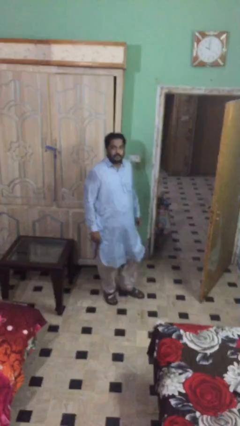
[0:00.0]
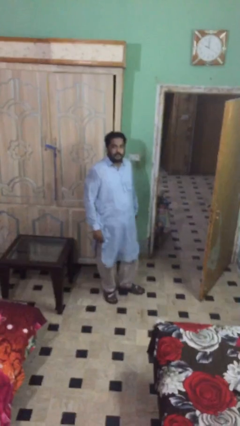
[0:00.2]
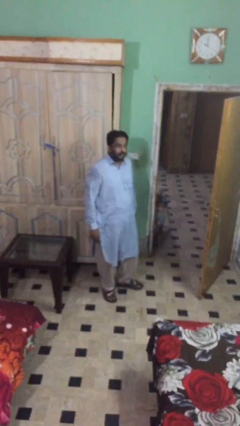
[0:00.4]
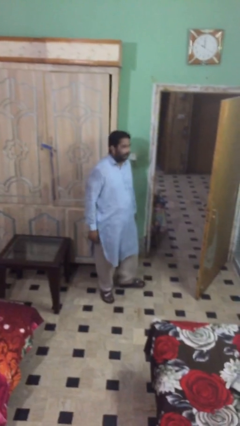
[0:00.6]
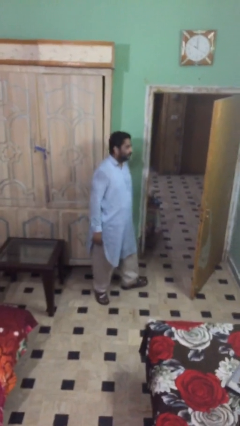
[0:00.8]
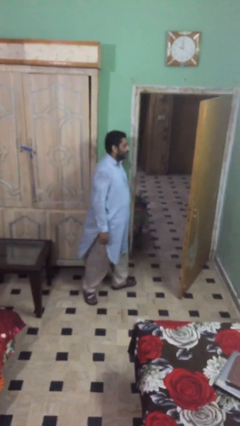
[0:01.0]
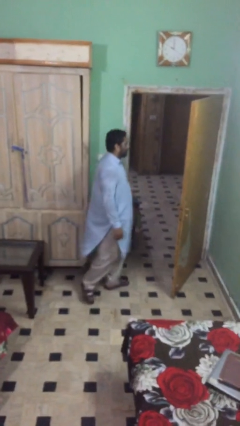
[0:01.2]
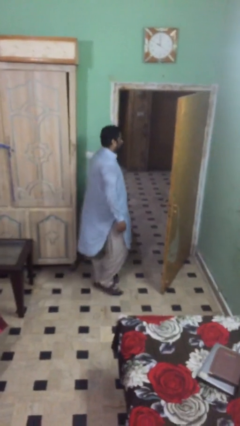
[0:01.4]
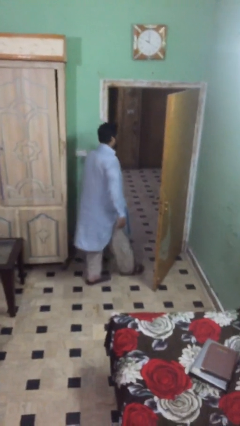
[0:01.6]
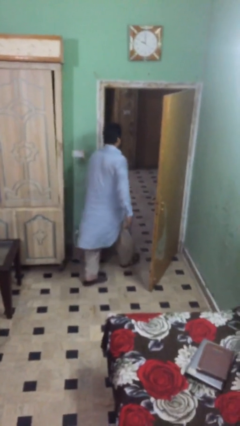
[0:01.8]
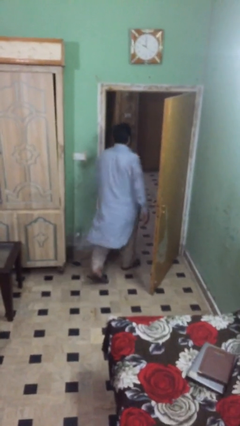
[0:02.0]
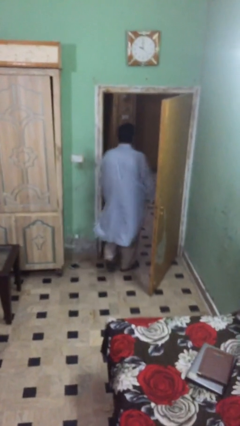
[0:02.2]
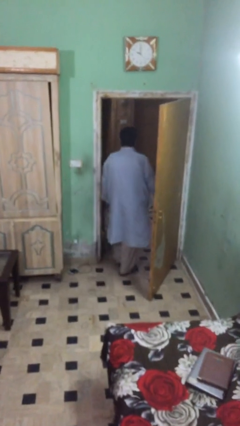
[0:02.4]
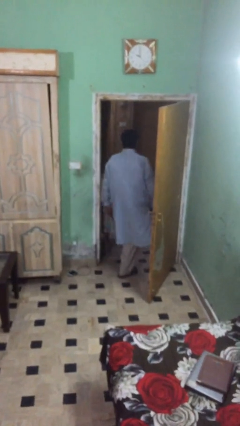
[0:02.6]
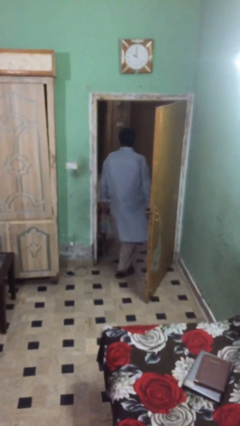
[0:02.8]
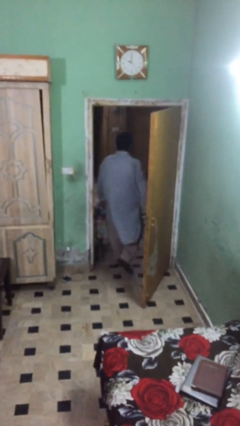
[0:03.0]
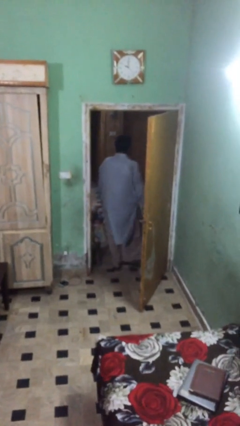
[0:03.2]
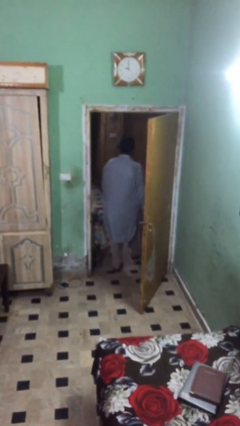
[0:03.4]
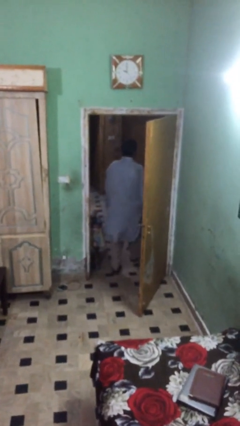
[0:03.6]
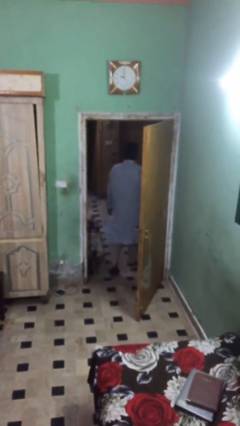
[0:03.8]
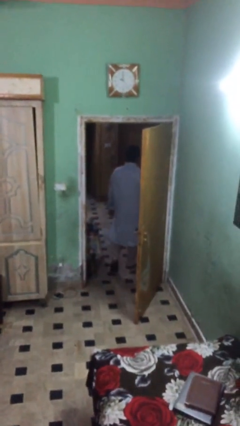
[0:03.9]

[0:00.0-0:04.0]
person exits scene through structure

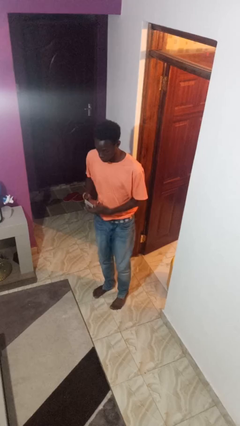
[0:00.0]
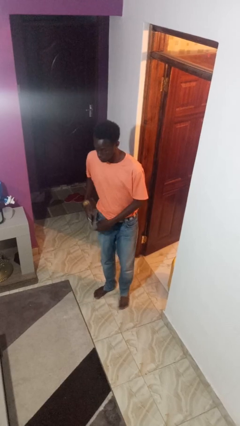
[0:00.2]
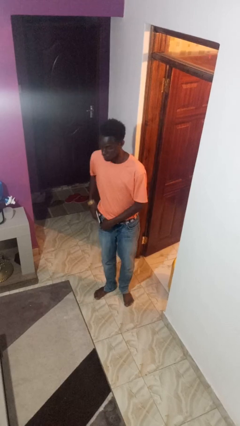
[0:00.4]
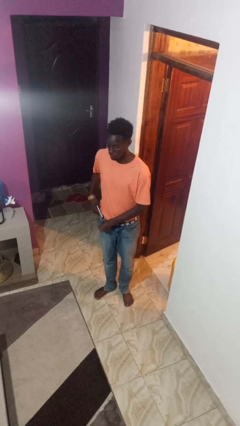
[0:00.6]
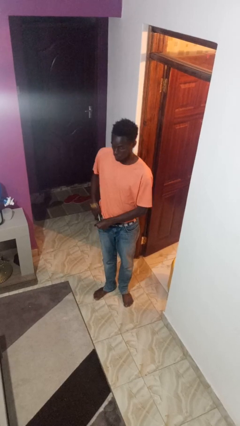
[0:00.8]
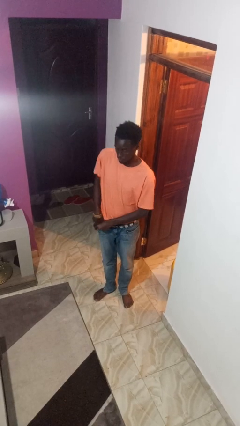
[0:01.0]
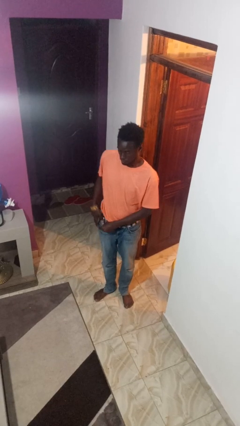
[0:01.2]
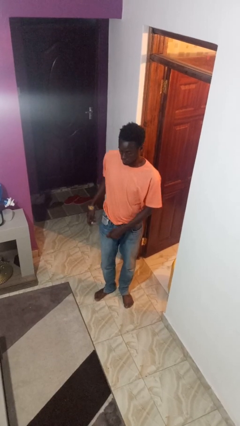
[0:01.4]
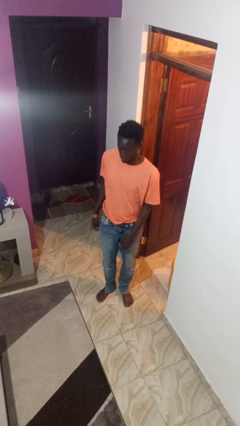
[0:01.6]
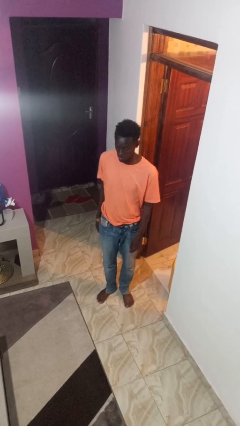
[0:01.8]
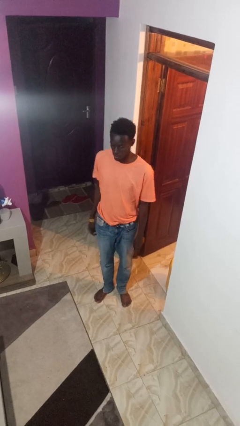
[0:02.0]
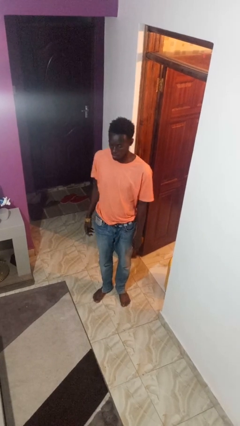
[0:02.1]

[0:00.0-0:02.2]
person puts phone into pocket

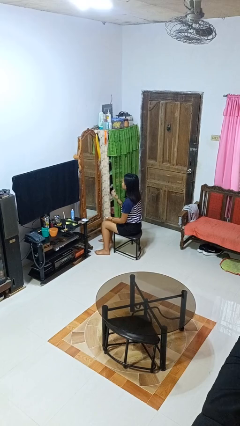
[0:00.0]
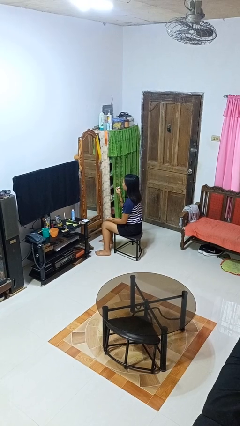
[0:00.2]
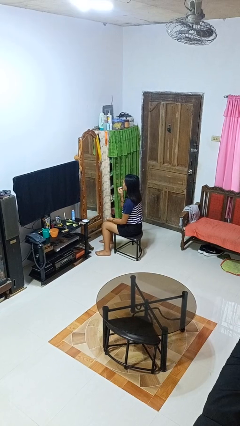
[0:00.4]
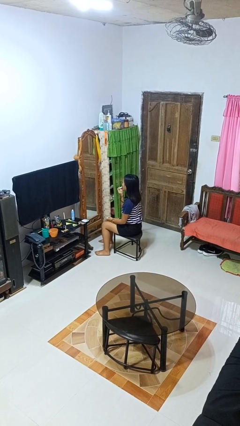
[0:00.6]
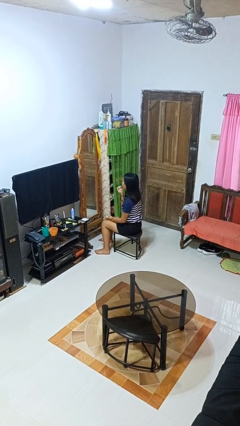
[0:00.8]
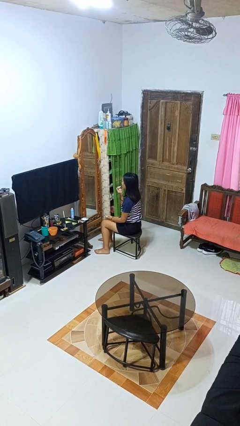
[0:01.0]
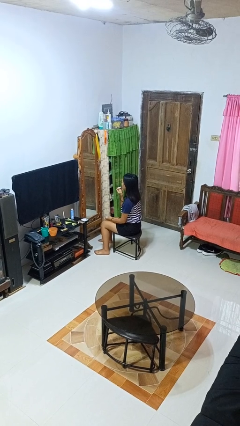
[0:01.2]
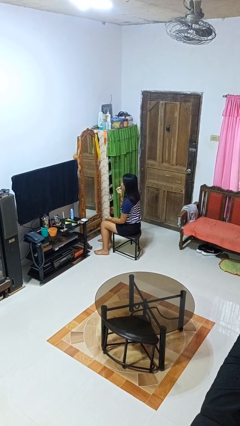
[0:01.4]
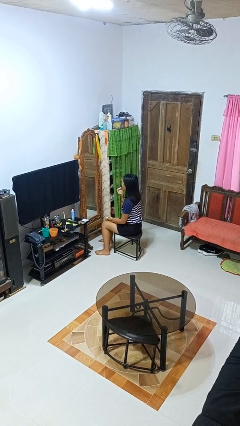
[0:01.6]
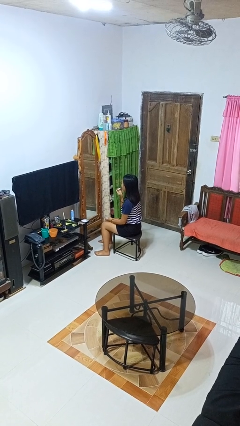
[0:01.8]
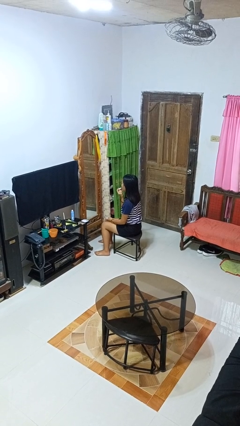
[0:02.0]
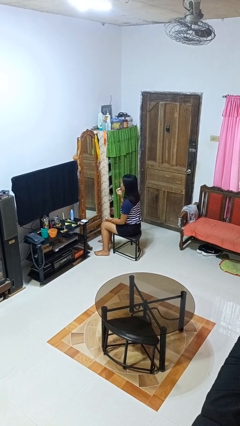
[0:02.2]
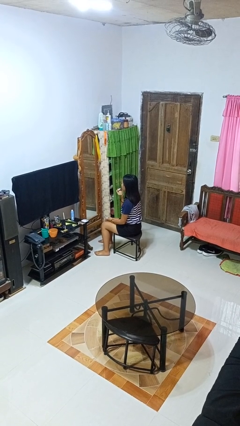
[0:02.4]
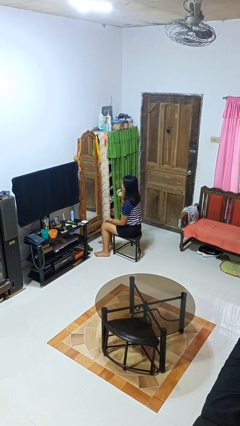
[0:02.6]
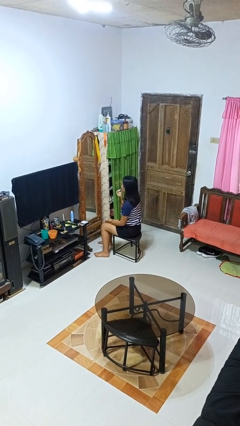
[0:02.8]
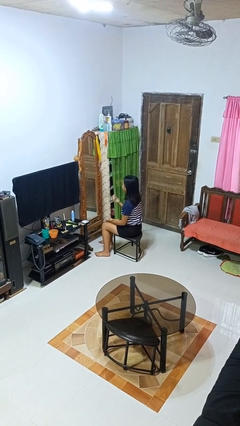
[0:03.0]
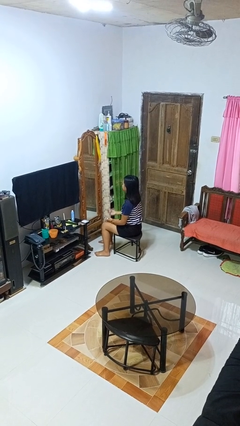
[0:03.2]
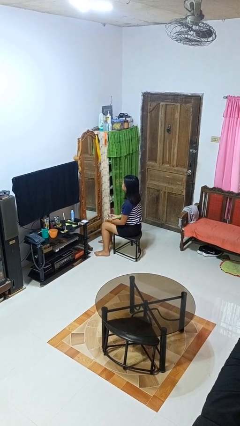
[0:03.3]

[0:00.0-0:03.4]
person applies lip makeup

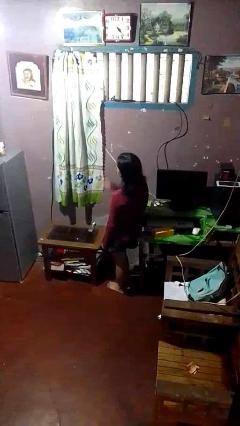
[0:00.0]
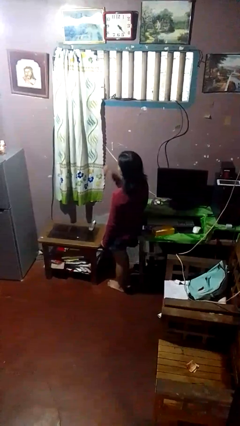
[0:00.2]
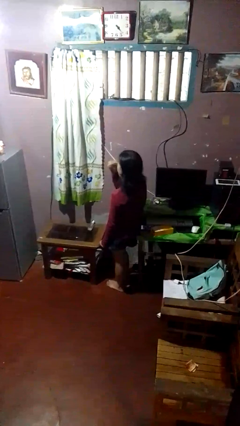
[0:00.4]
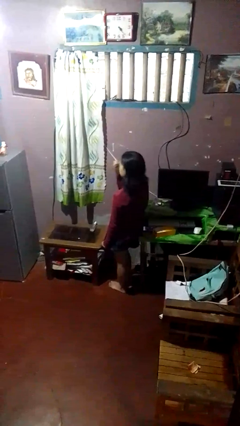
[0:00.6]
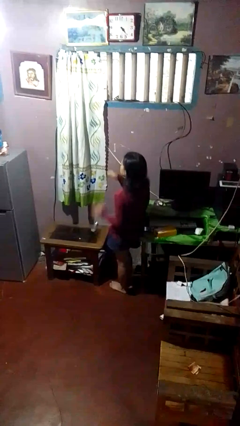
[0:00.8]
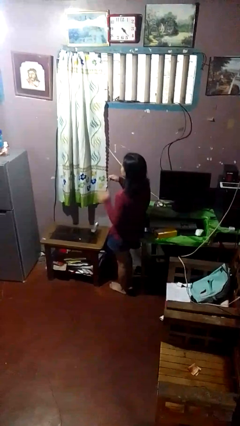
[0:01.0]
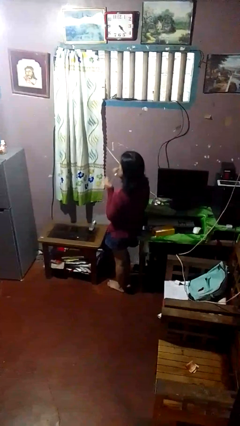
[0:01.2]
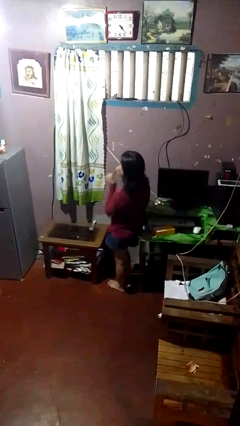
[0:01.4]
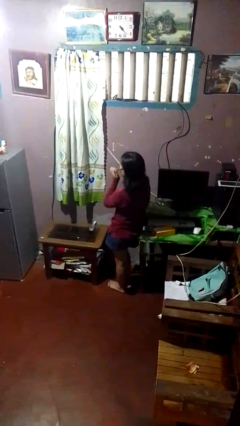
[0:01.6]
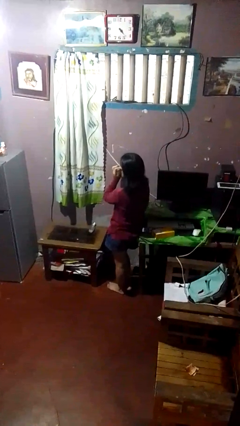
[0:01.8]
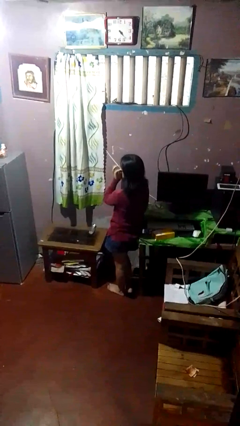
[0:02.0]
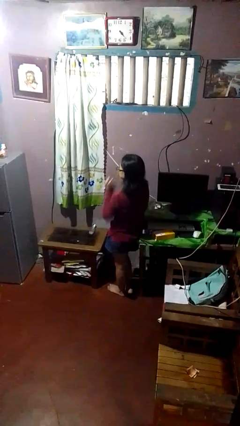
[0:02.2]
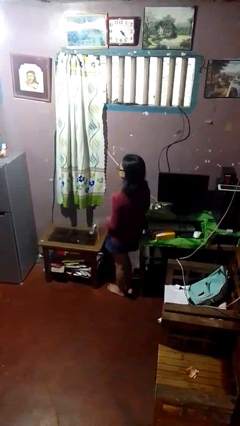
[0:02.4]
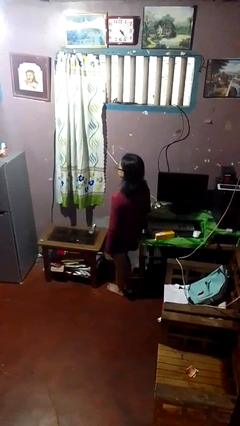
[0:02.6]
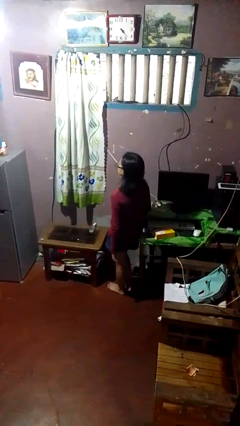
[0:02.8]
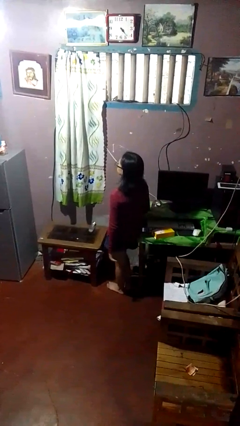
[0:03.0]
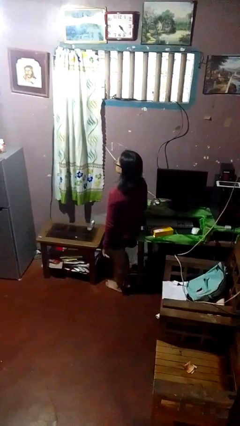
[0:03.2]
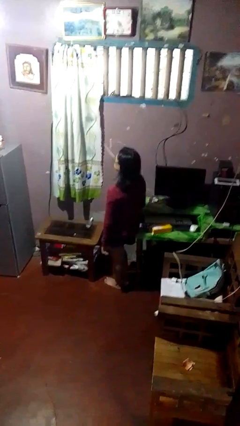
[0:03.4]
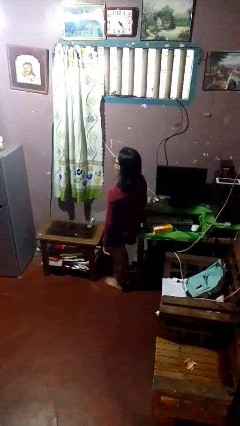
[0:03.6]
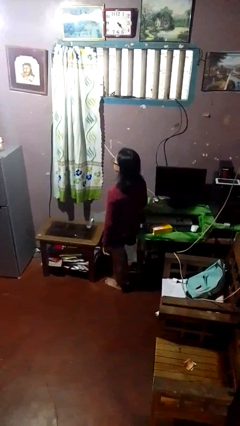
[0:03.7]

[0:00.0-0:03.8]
person puts on glasses

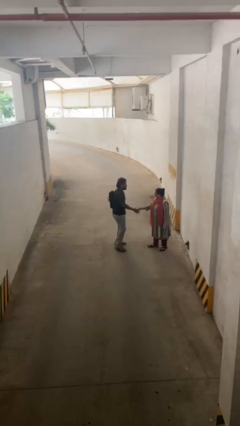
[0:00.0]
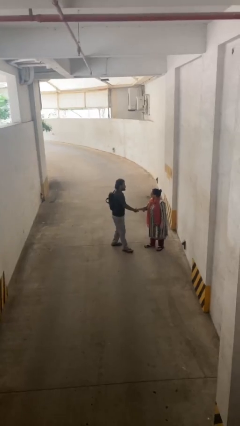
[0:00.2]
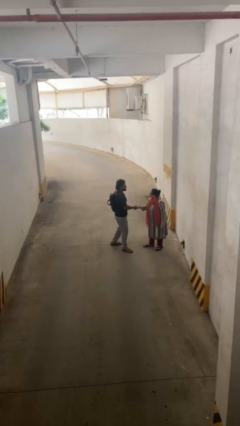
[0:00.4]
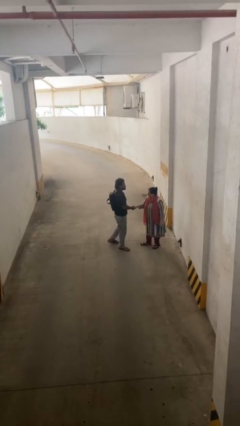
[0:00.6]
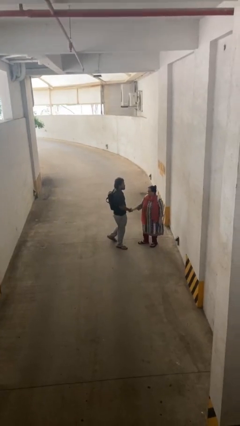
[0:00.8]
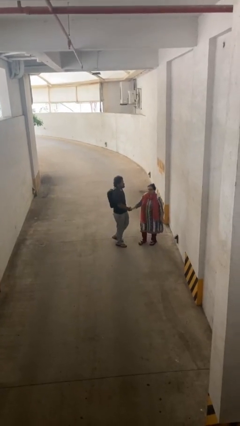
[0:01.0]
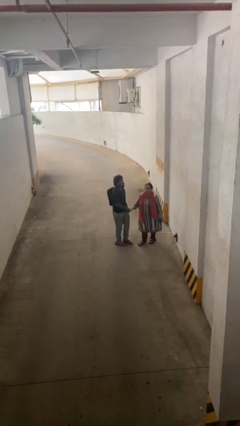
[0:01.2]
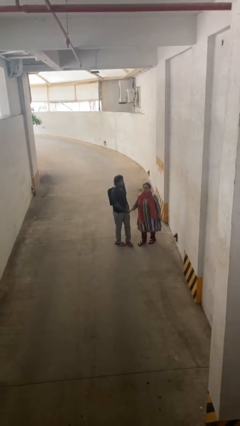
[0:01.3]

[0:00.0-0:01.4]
person shakes hand

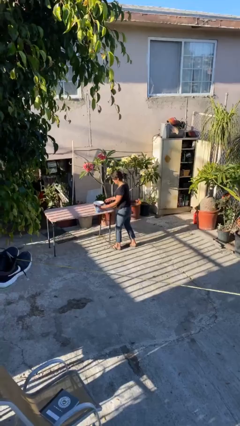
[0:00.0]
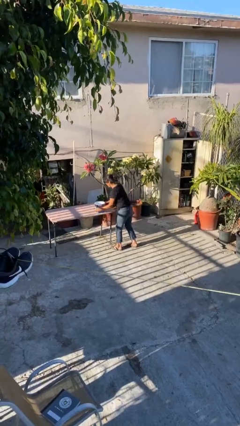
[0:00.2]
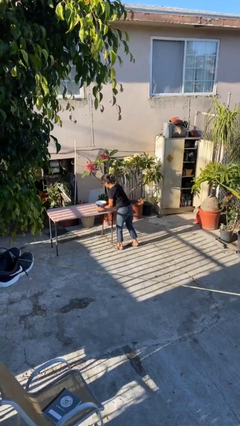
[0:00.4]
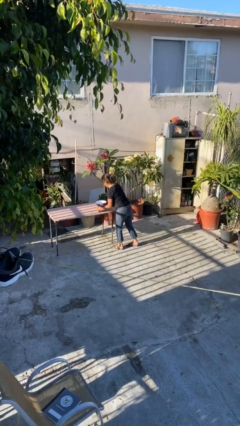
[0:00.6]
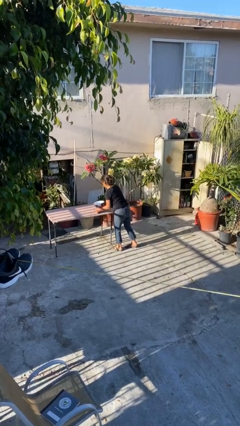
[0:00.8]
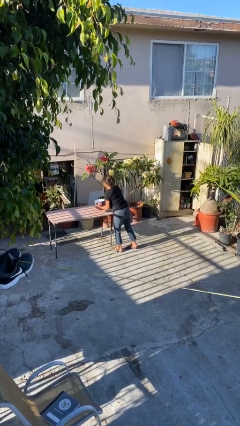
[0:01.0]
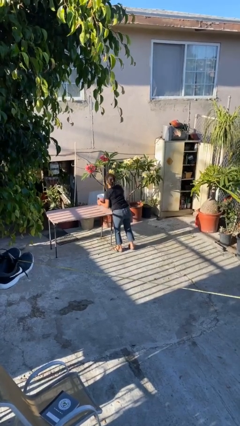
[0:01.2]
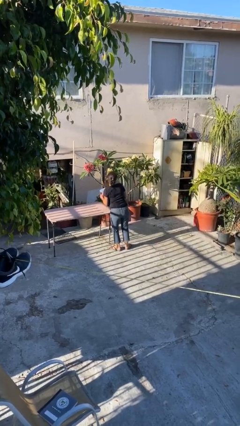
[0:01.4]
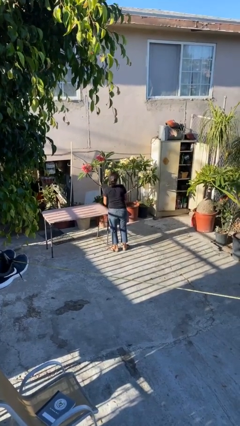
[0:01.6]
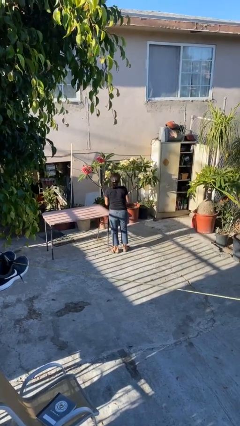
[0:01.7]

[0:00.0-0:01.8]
person picks up object from table

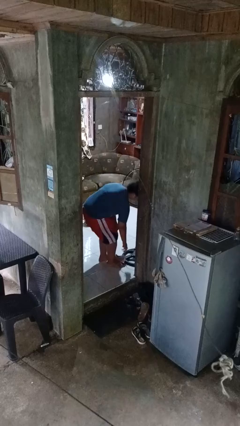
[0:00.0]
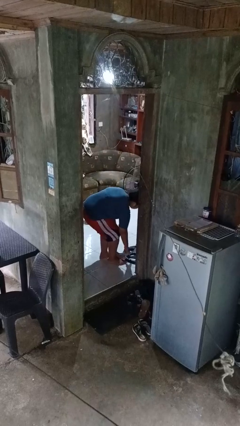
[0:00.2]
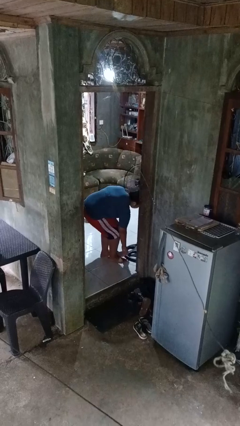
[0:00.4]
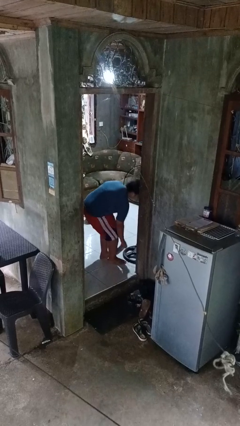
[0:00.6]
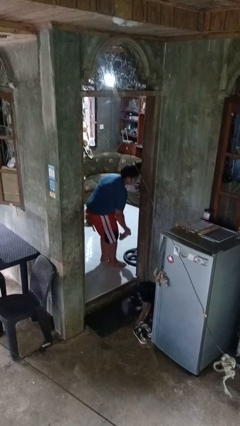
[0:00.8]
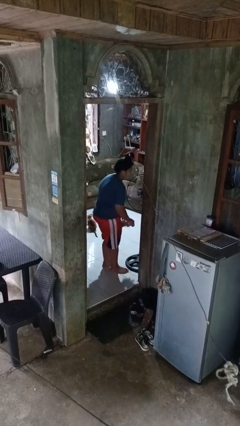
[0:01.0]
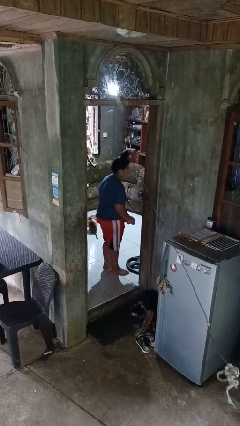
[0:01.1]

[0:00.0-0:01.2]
person picks up object from floor
